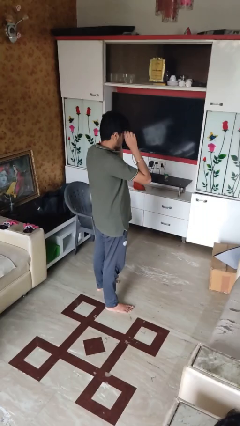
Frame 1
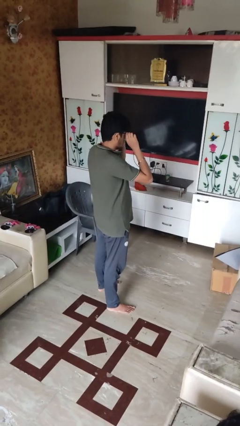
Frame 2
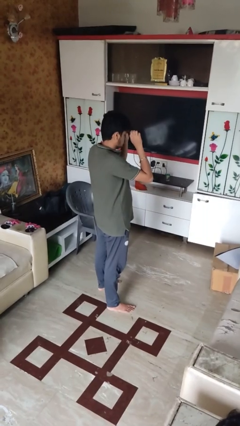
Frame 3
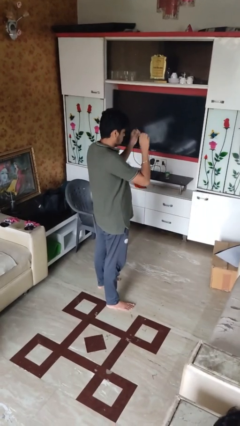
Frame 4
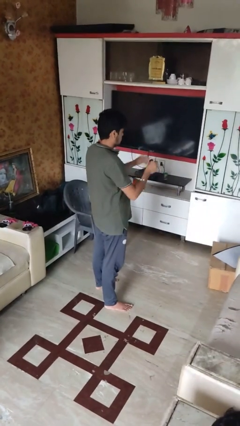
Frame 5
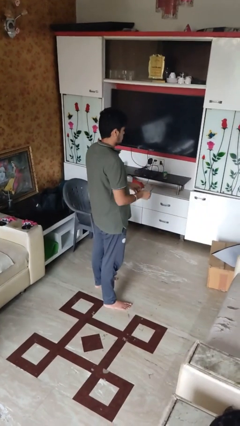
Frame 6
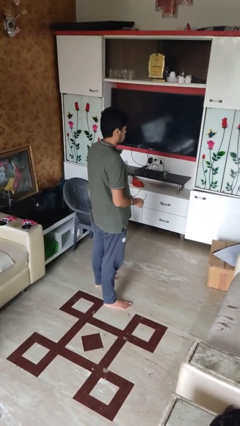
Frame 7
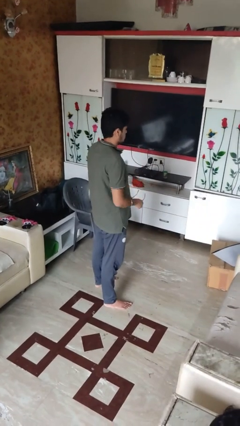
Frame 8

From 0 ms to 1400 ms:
person takes off glasses

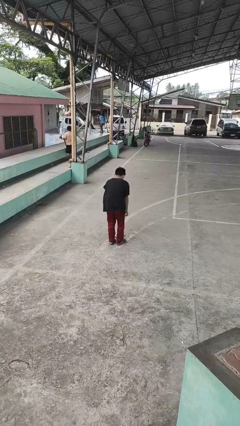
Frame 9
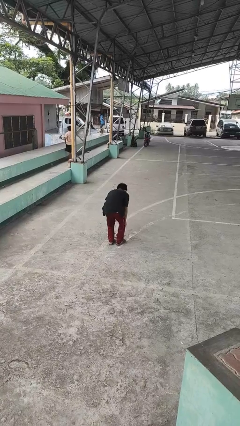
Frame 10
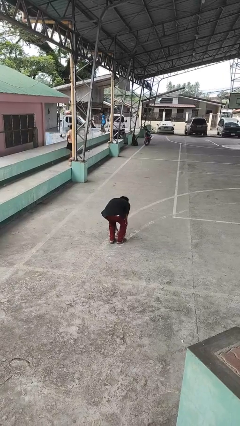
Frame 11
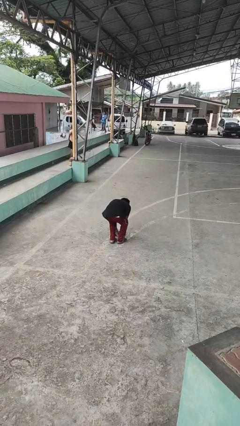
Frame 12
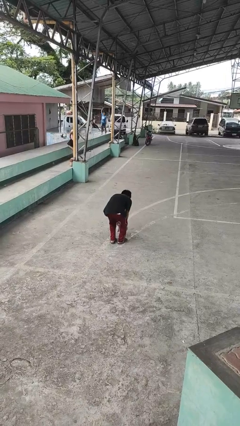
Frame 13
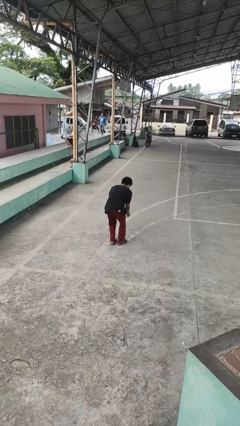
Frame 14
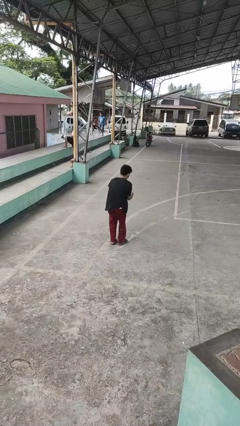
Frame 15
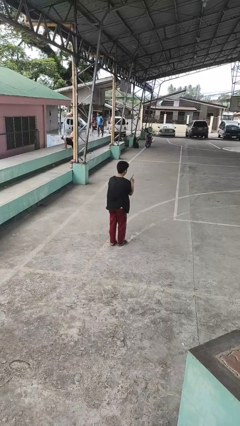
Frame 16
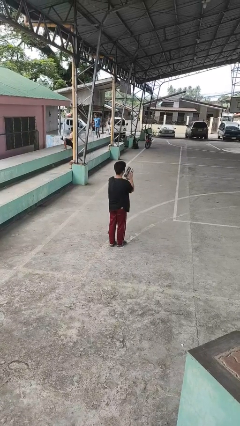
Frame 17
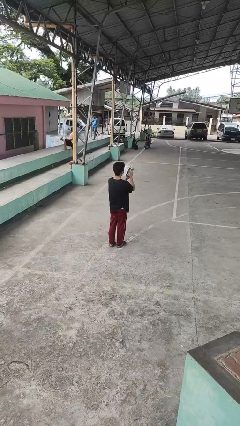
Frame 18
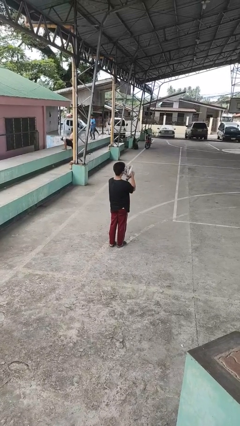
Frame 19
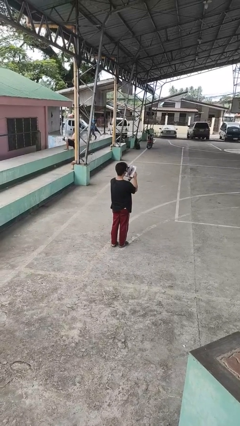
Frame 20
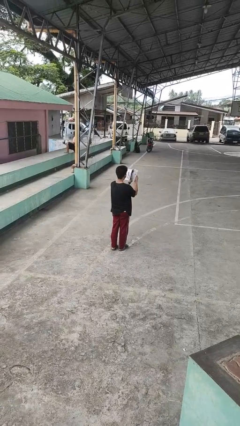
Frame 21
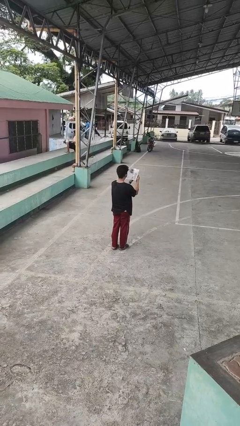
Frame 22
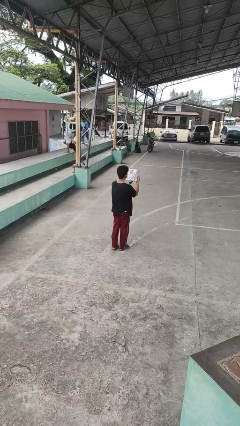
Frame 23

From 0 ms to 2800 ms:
person picks up object from floor

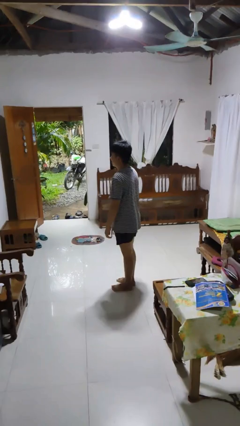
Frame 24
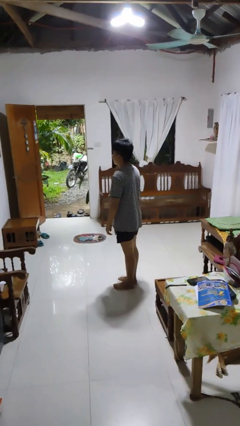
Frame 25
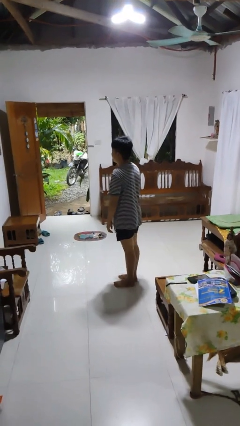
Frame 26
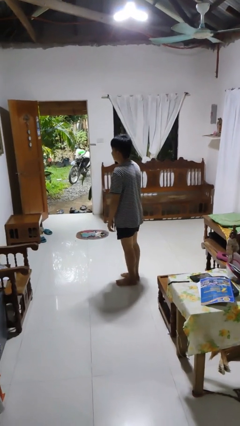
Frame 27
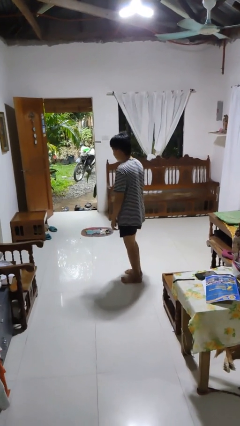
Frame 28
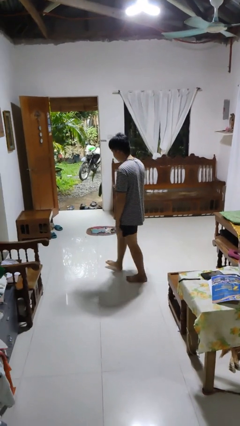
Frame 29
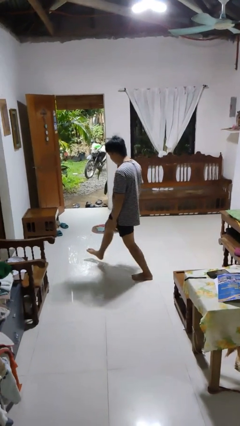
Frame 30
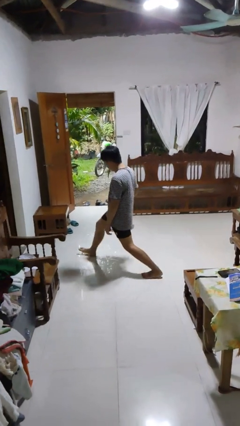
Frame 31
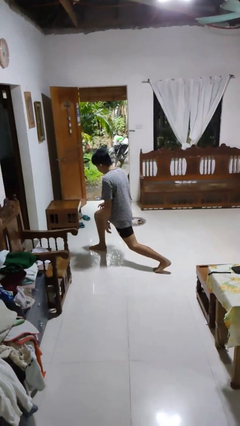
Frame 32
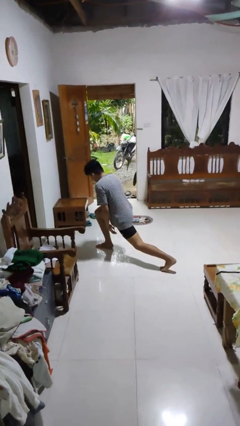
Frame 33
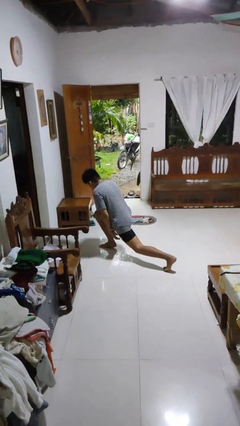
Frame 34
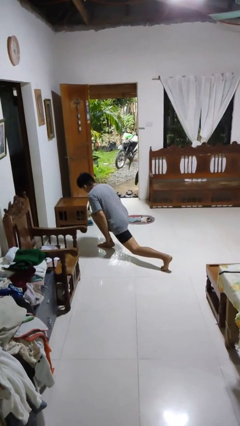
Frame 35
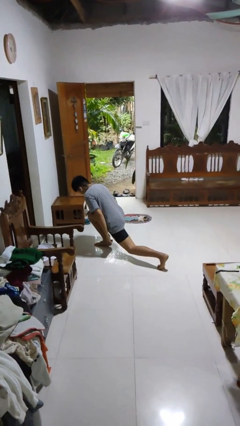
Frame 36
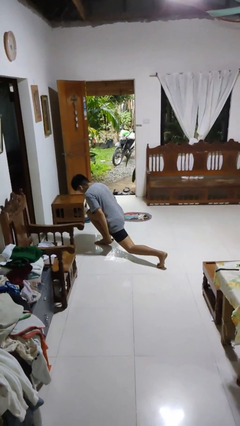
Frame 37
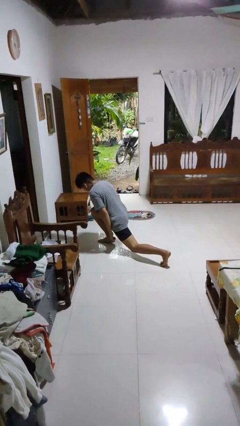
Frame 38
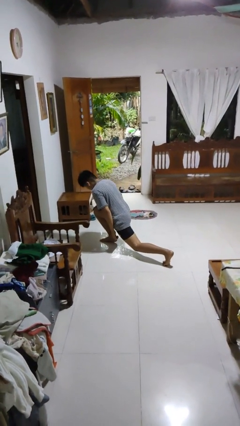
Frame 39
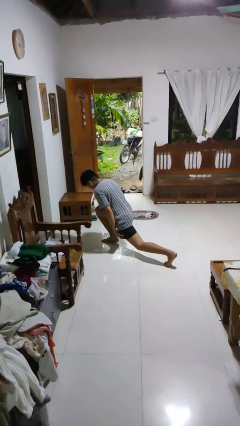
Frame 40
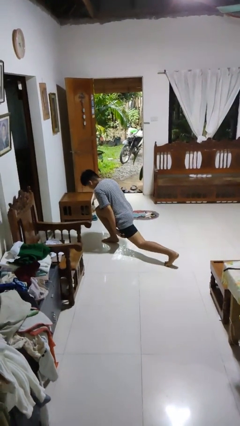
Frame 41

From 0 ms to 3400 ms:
person exercises with lunges

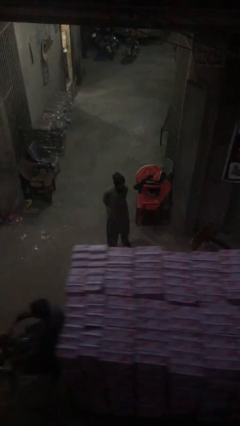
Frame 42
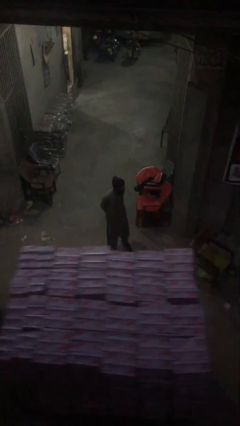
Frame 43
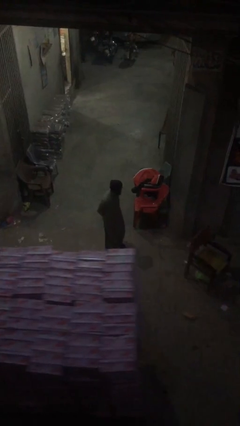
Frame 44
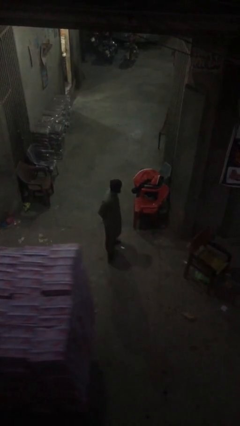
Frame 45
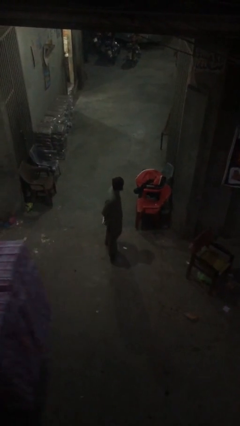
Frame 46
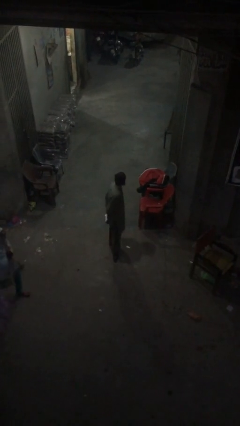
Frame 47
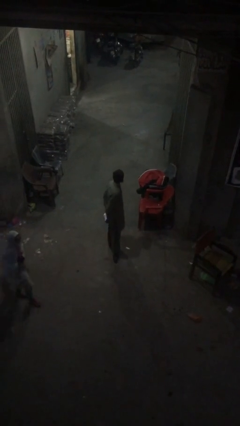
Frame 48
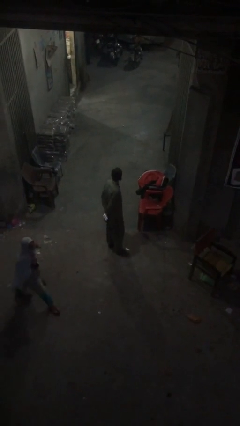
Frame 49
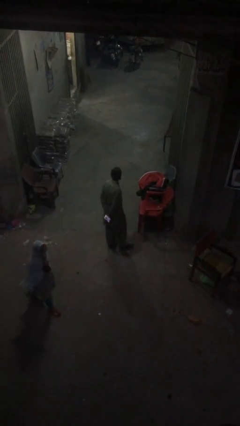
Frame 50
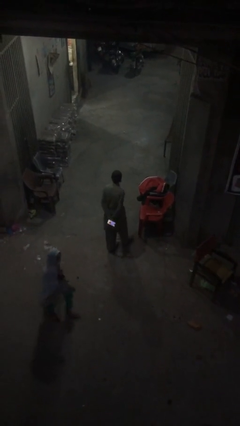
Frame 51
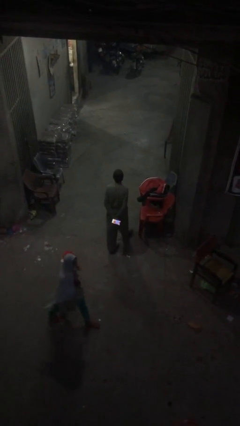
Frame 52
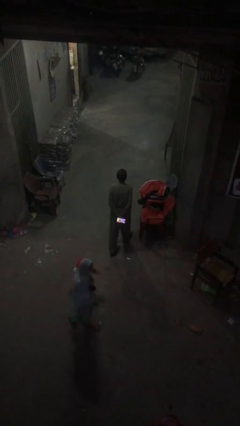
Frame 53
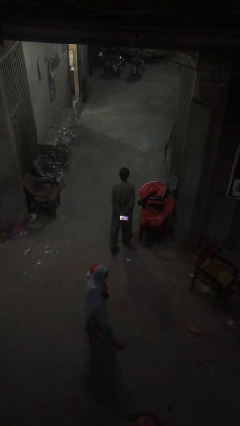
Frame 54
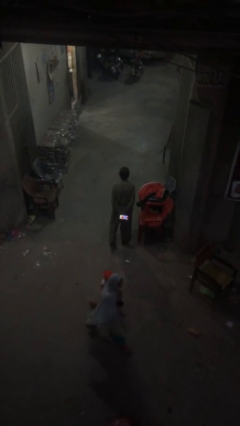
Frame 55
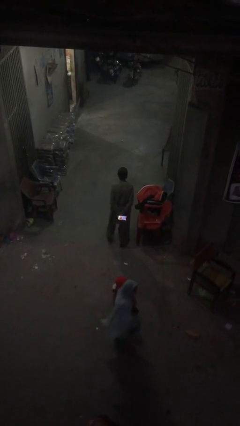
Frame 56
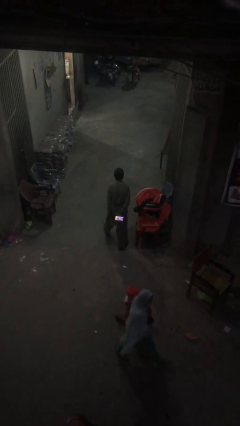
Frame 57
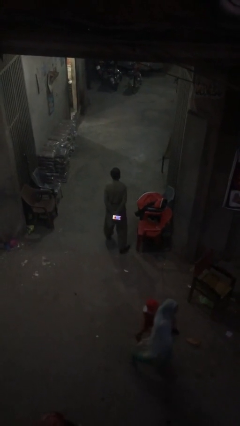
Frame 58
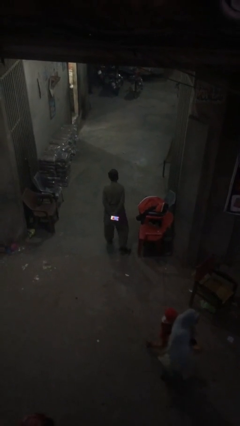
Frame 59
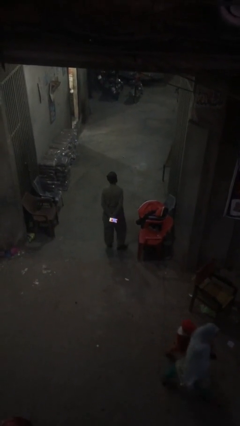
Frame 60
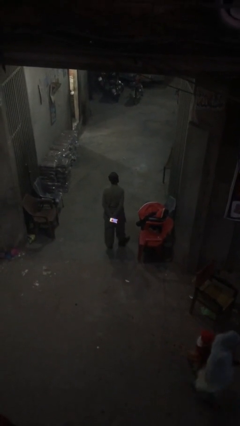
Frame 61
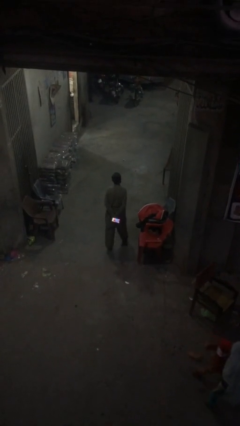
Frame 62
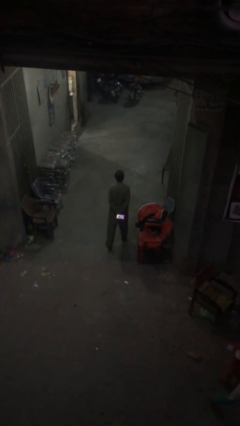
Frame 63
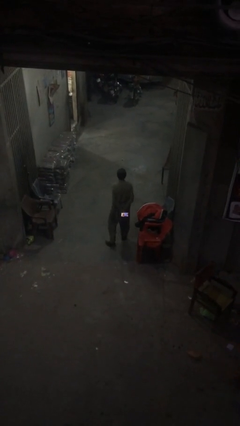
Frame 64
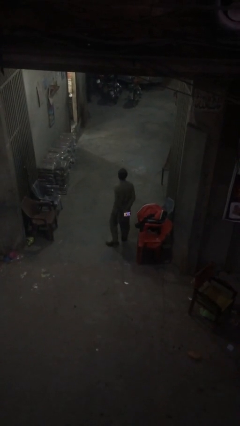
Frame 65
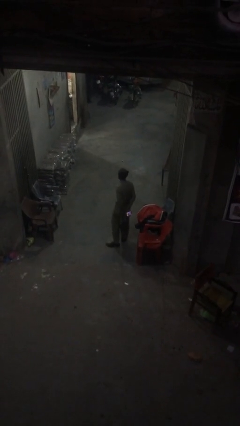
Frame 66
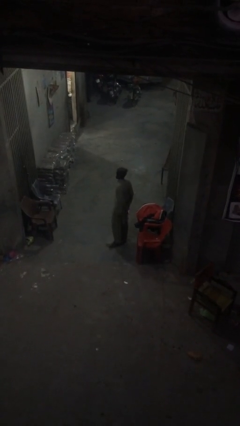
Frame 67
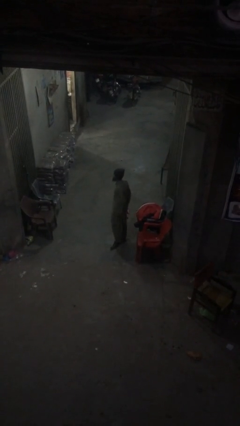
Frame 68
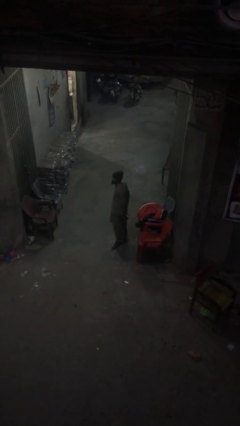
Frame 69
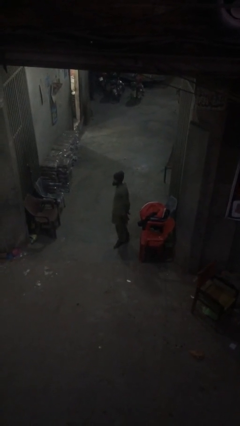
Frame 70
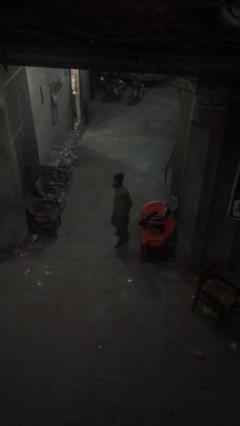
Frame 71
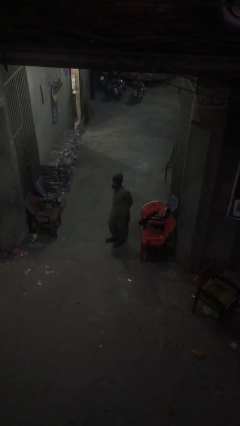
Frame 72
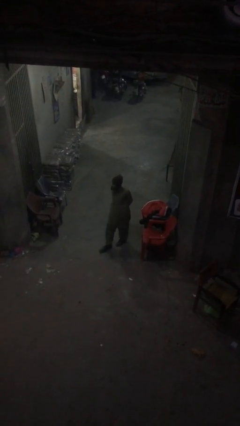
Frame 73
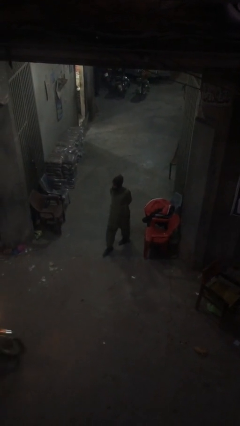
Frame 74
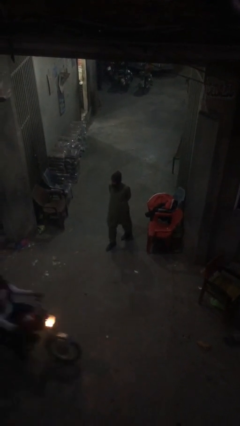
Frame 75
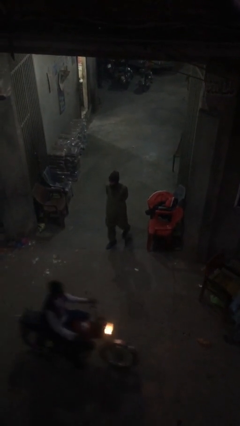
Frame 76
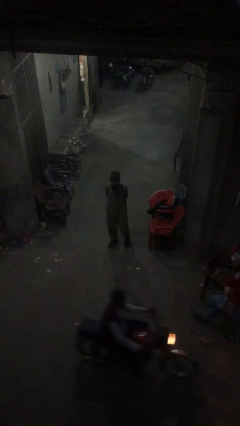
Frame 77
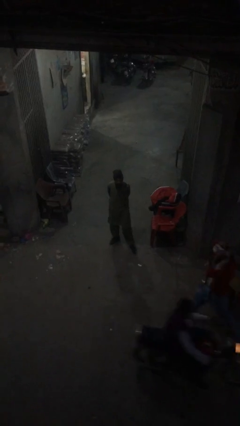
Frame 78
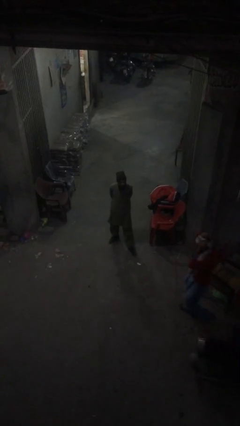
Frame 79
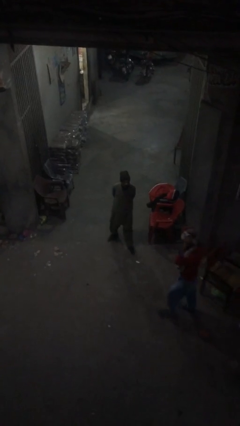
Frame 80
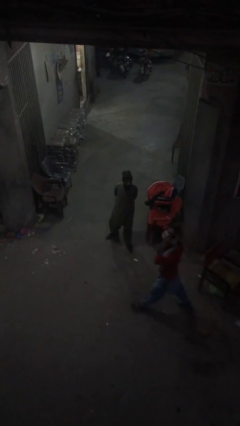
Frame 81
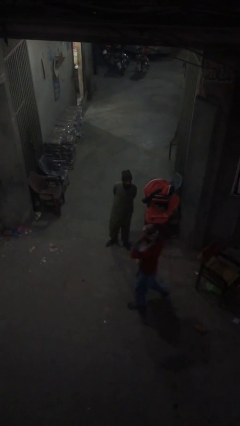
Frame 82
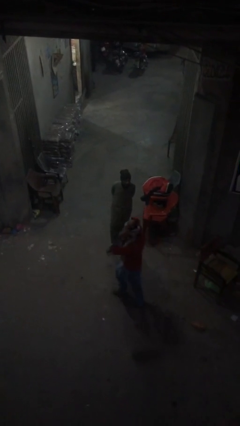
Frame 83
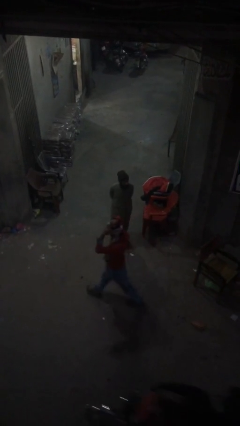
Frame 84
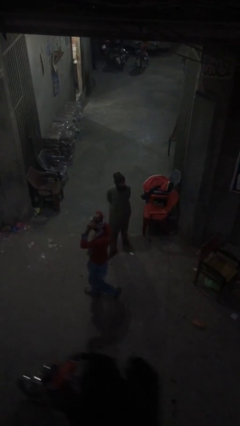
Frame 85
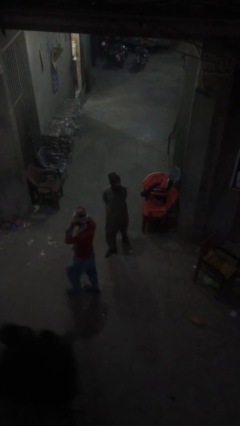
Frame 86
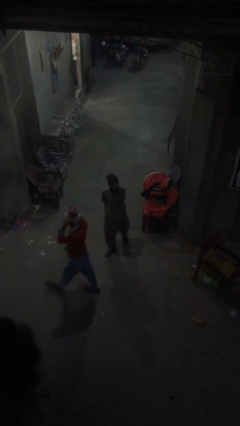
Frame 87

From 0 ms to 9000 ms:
person walks

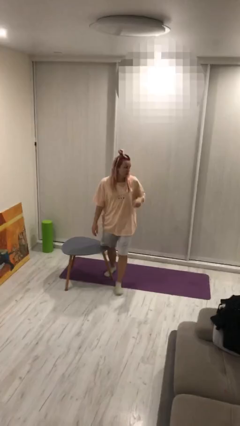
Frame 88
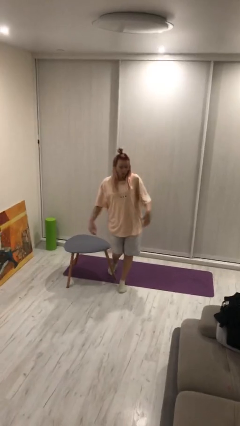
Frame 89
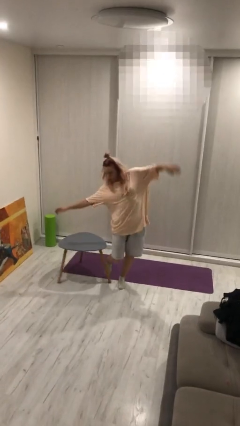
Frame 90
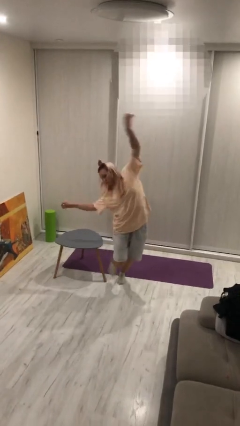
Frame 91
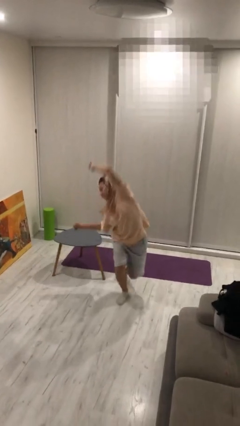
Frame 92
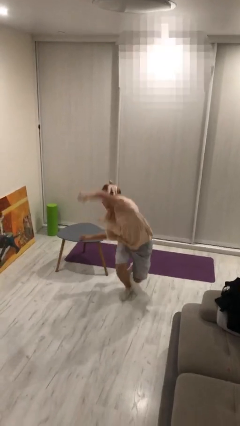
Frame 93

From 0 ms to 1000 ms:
person trips on object on floor
